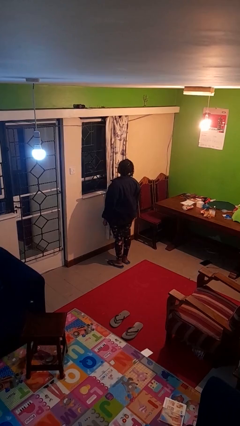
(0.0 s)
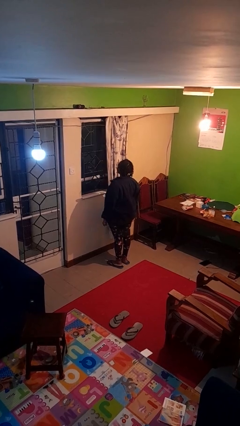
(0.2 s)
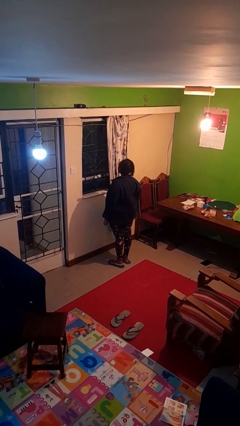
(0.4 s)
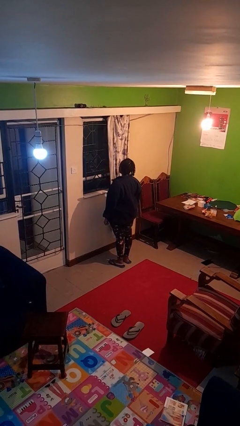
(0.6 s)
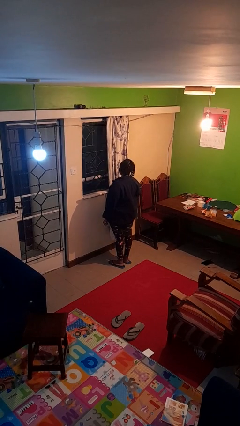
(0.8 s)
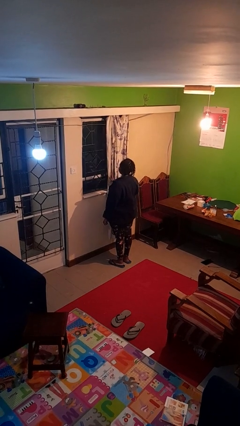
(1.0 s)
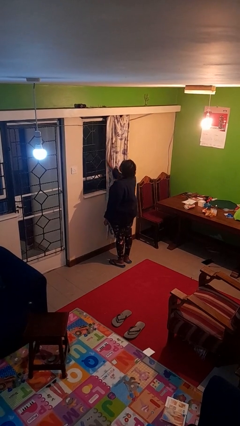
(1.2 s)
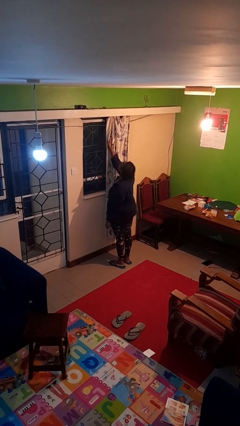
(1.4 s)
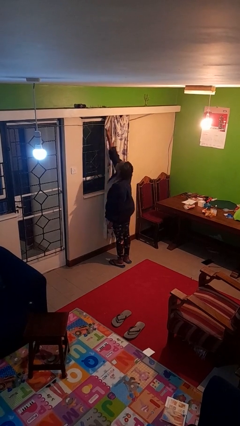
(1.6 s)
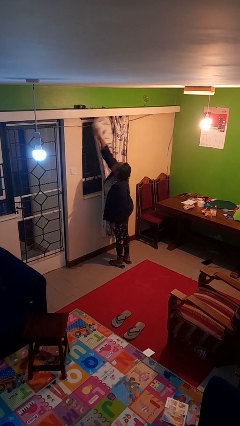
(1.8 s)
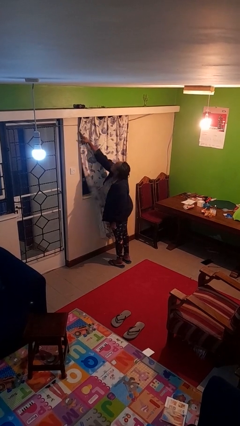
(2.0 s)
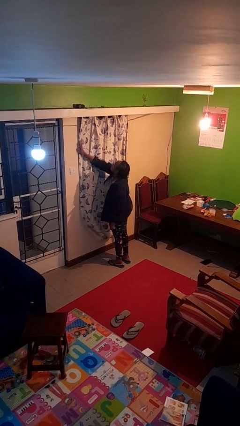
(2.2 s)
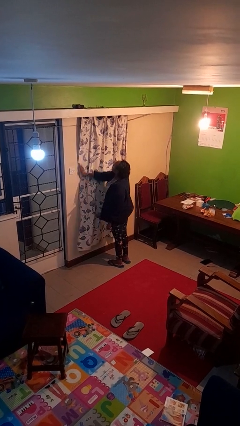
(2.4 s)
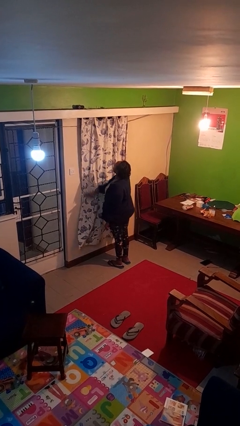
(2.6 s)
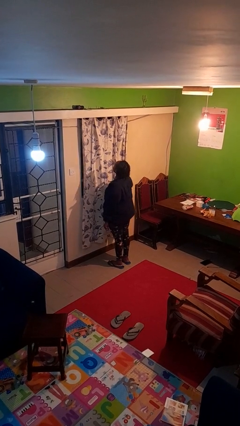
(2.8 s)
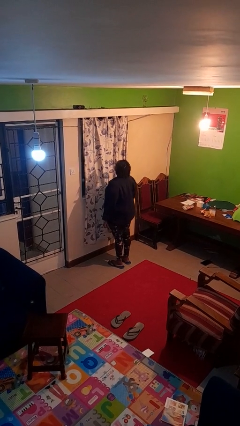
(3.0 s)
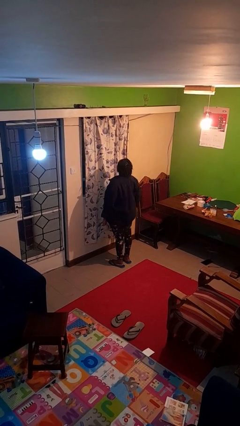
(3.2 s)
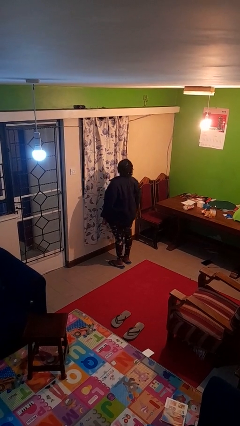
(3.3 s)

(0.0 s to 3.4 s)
person closes curtains

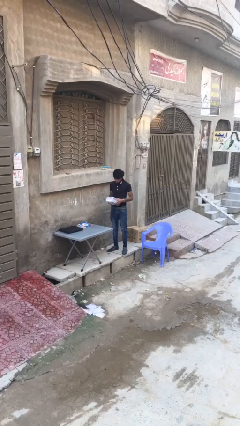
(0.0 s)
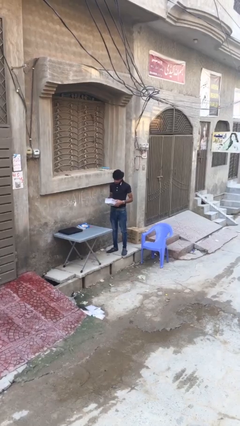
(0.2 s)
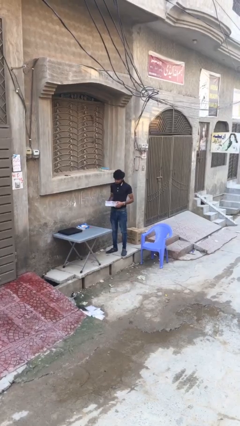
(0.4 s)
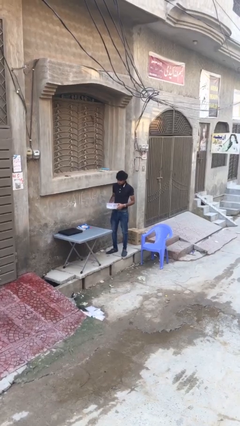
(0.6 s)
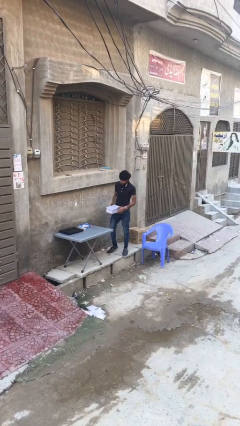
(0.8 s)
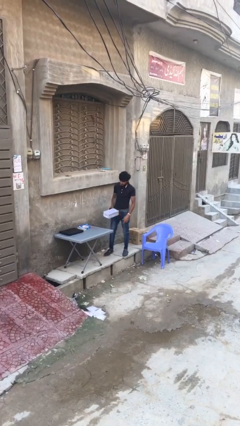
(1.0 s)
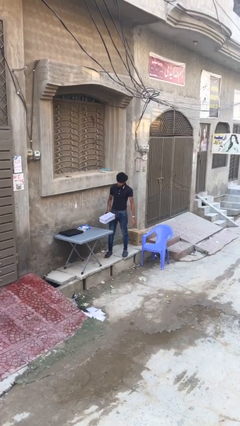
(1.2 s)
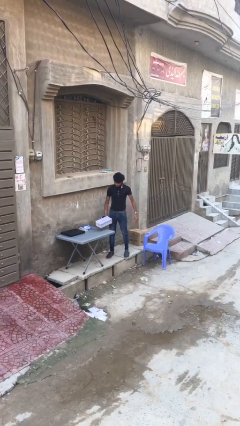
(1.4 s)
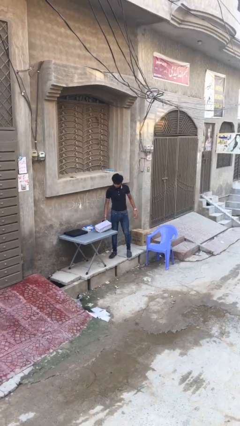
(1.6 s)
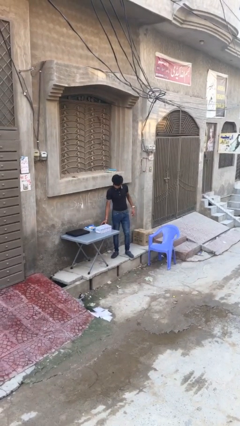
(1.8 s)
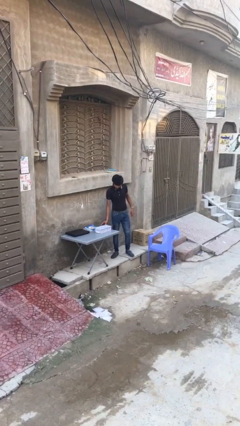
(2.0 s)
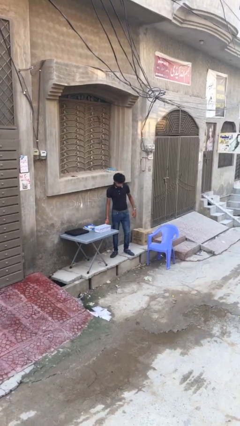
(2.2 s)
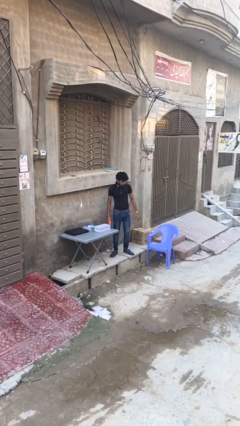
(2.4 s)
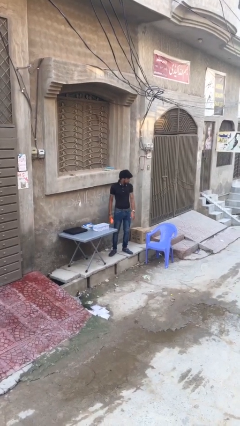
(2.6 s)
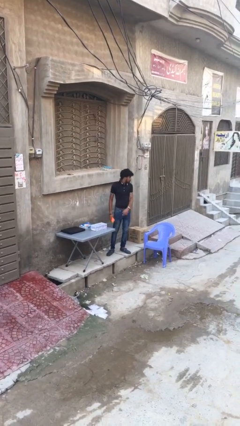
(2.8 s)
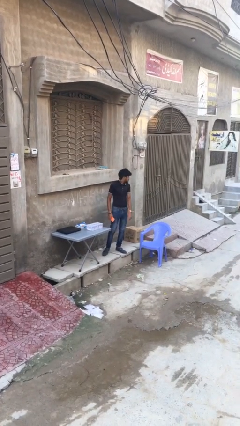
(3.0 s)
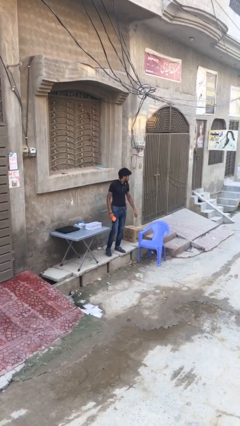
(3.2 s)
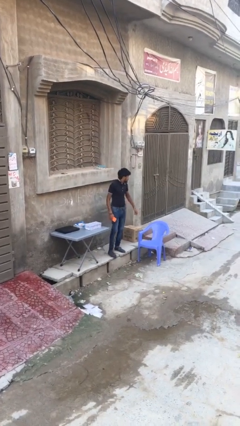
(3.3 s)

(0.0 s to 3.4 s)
person puts down object on table

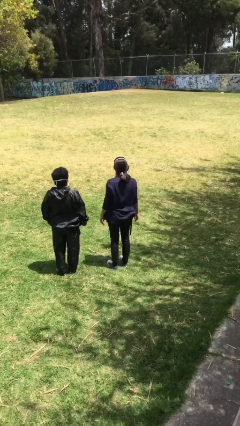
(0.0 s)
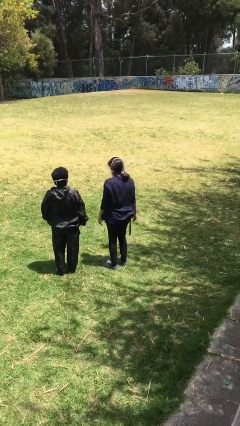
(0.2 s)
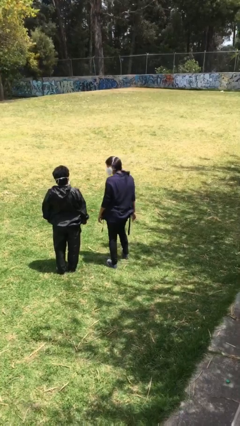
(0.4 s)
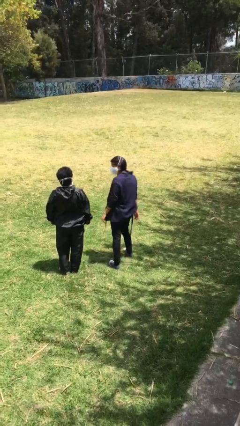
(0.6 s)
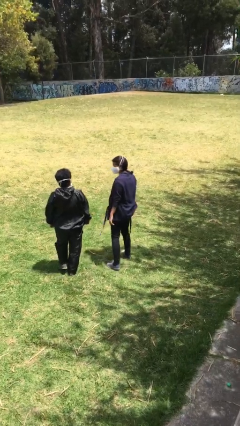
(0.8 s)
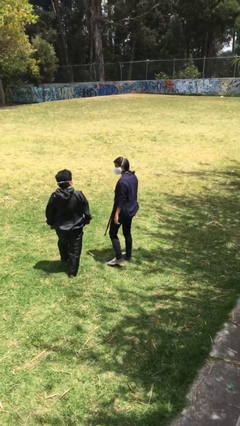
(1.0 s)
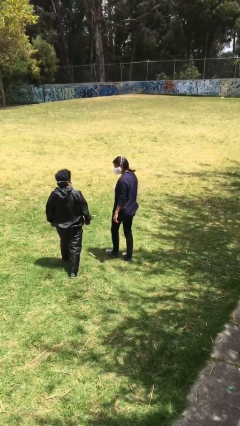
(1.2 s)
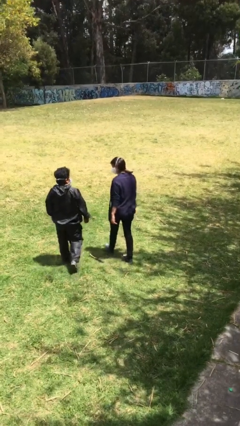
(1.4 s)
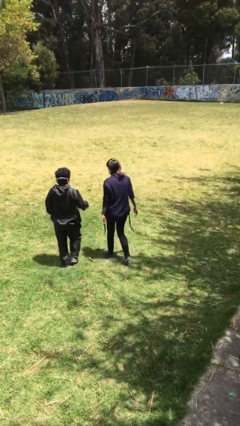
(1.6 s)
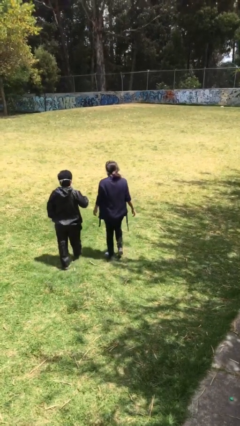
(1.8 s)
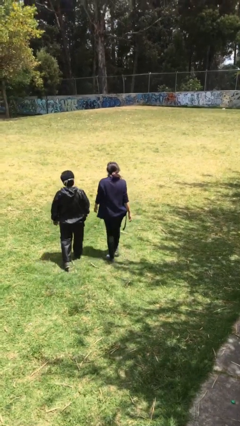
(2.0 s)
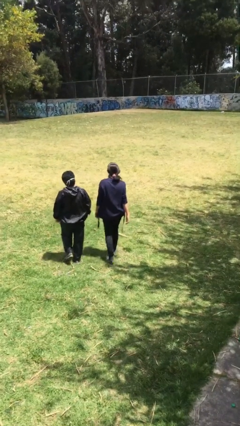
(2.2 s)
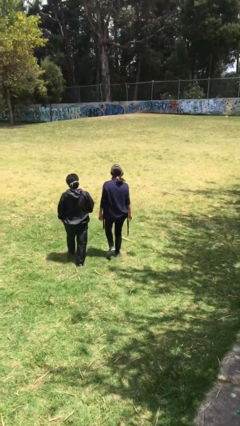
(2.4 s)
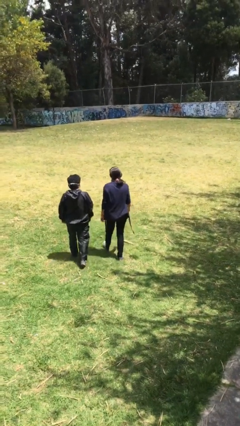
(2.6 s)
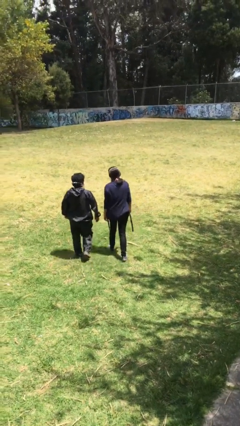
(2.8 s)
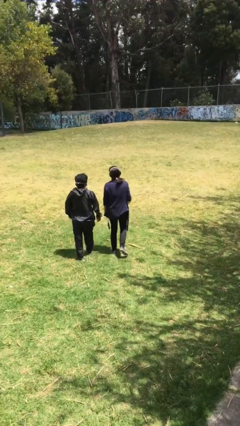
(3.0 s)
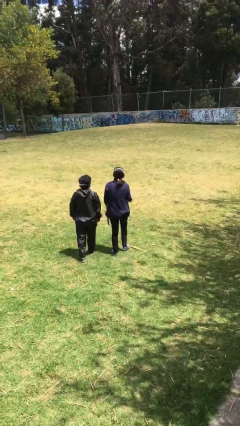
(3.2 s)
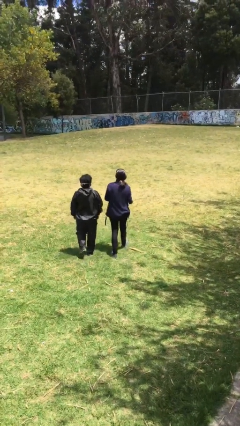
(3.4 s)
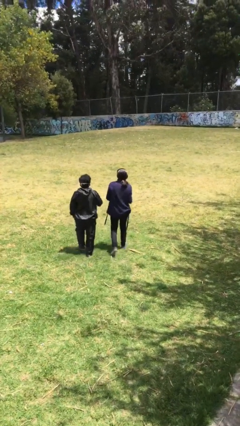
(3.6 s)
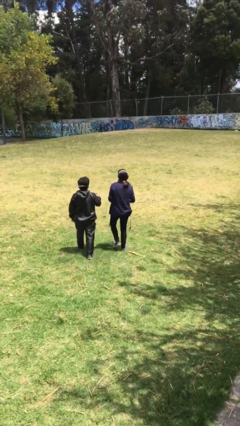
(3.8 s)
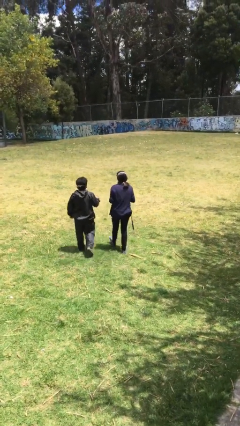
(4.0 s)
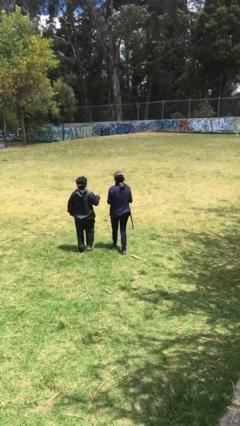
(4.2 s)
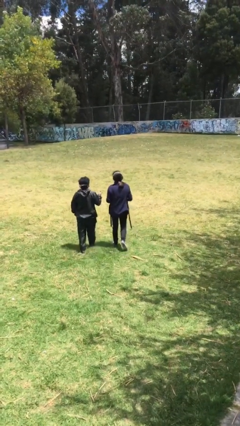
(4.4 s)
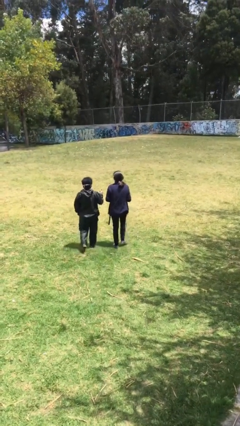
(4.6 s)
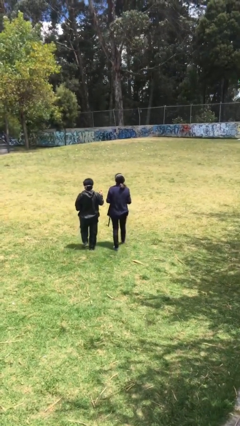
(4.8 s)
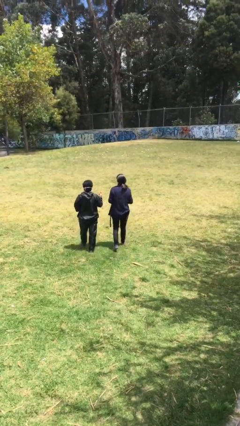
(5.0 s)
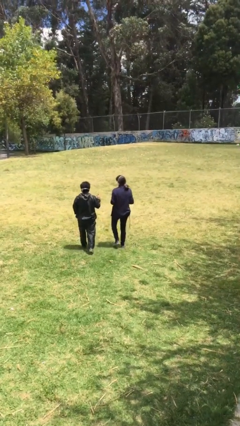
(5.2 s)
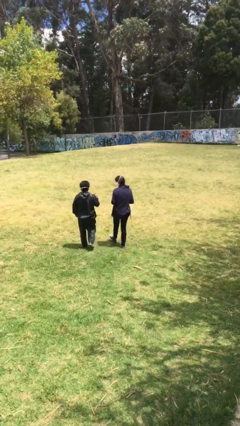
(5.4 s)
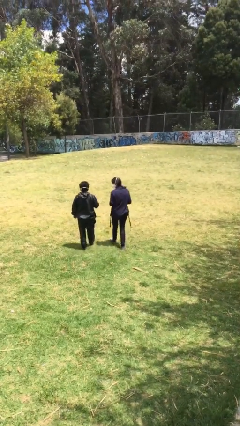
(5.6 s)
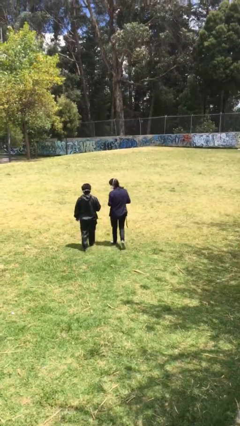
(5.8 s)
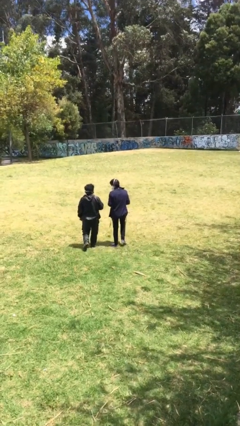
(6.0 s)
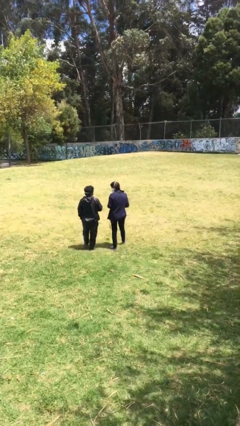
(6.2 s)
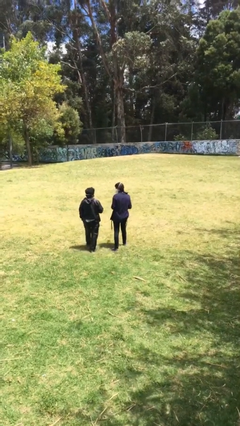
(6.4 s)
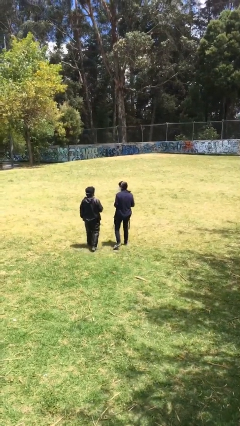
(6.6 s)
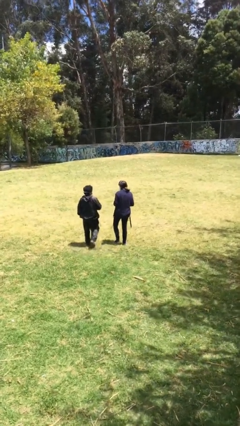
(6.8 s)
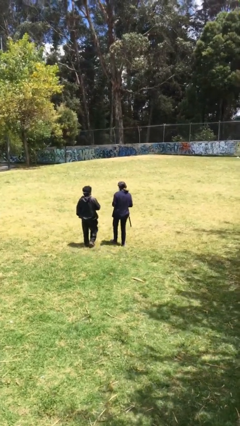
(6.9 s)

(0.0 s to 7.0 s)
person talks to person

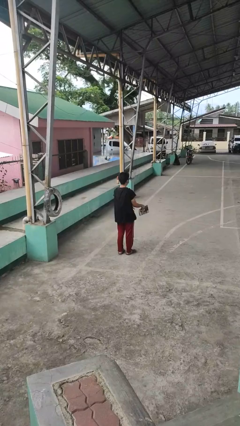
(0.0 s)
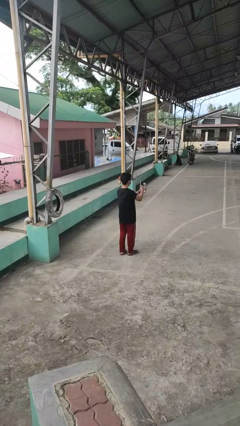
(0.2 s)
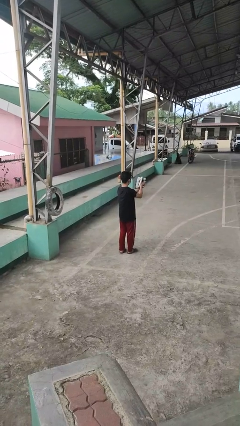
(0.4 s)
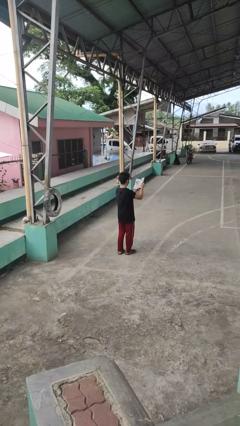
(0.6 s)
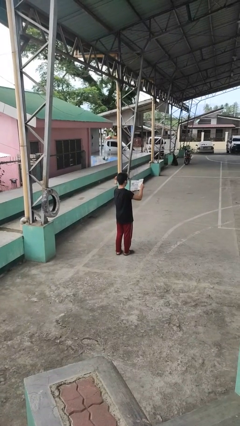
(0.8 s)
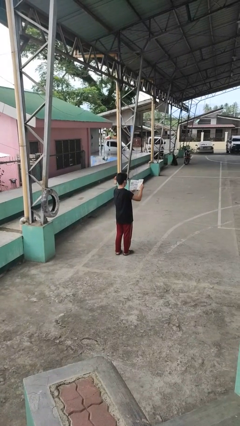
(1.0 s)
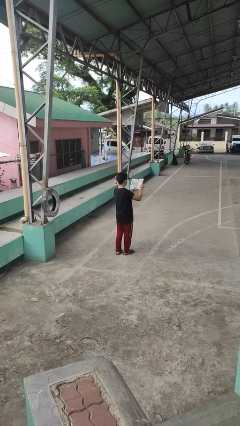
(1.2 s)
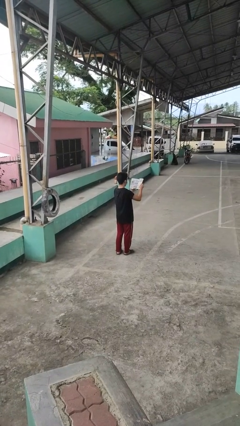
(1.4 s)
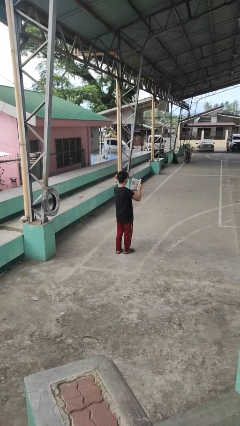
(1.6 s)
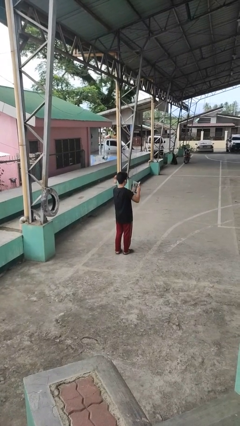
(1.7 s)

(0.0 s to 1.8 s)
person reads magazine

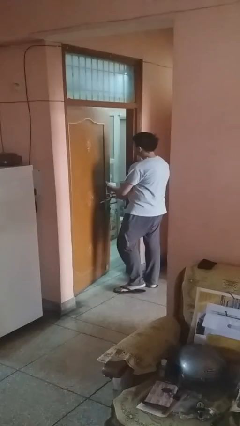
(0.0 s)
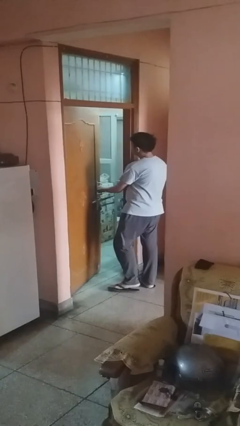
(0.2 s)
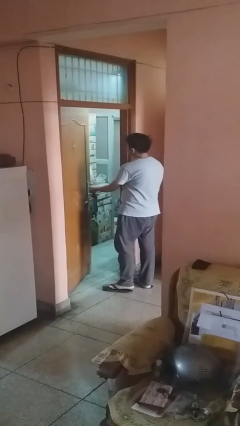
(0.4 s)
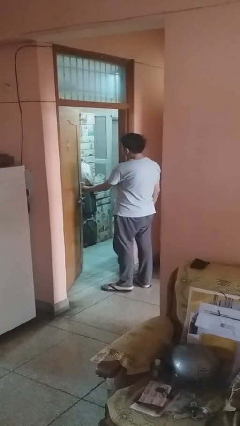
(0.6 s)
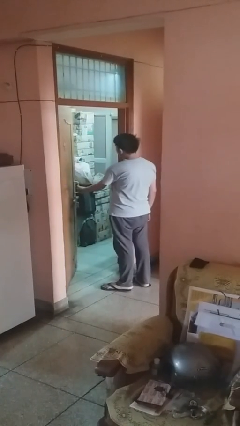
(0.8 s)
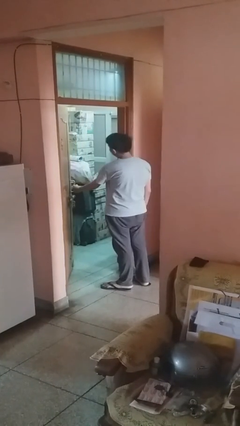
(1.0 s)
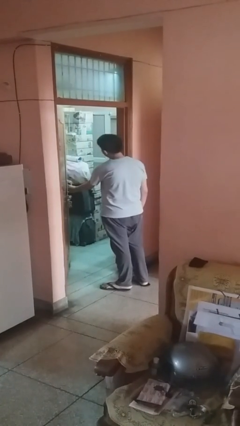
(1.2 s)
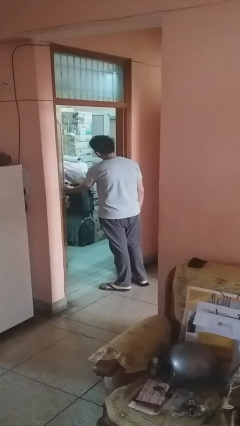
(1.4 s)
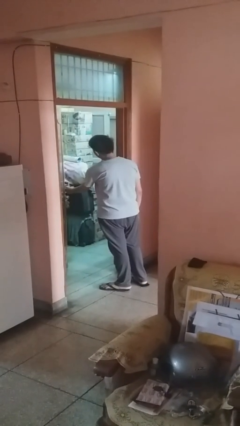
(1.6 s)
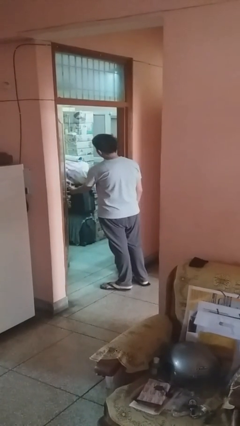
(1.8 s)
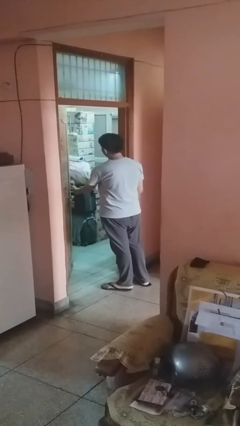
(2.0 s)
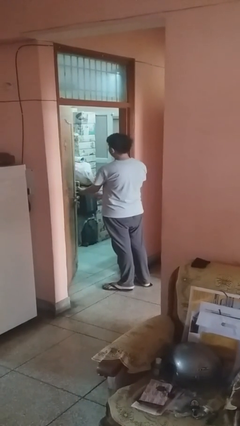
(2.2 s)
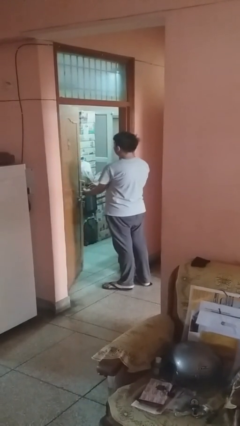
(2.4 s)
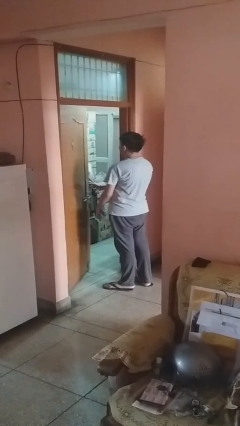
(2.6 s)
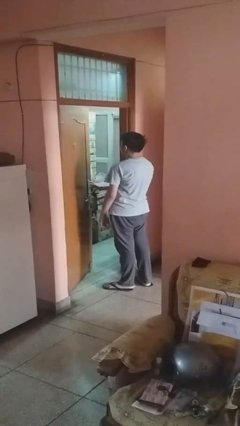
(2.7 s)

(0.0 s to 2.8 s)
person opens facility door
